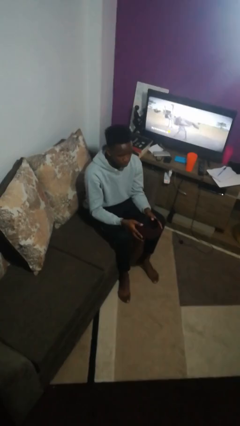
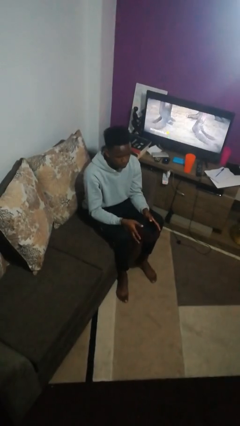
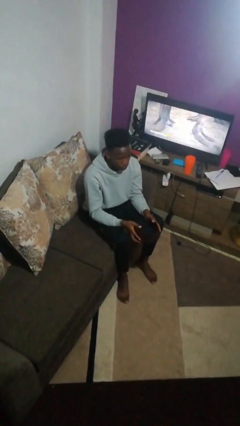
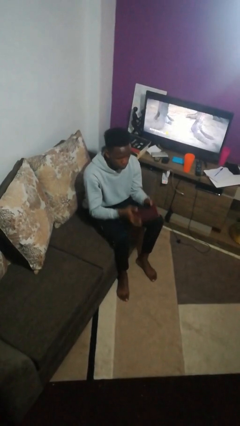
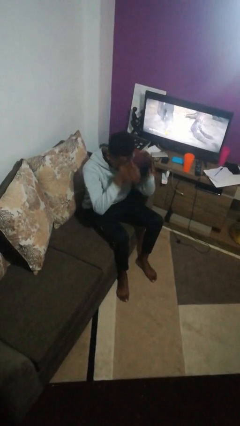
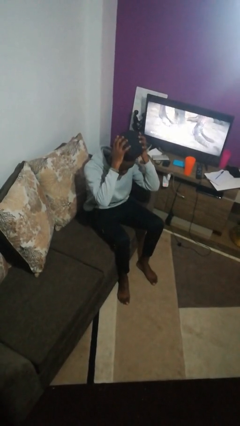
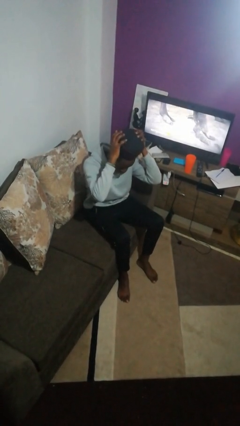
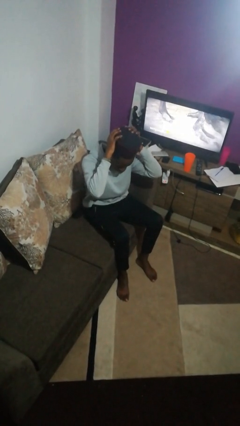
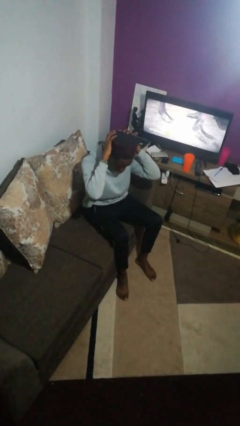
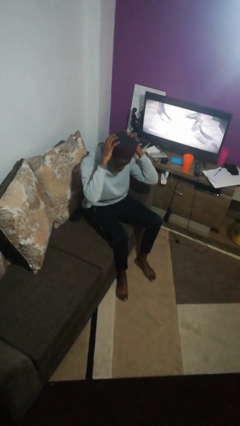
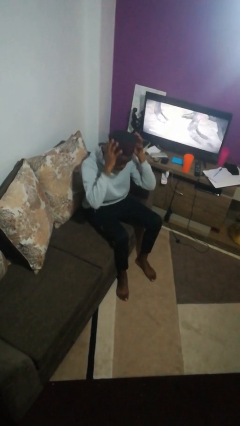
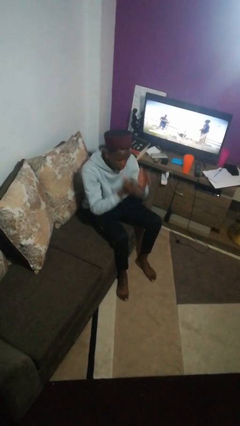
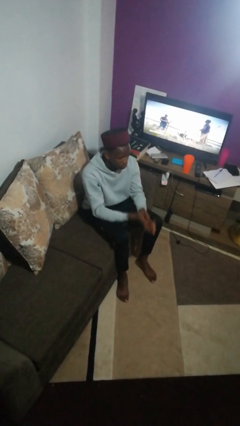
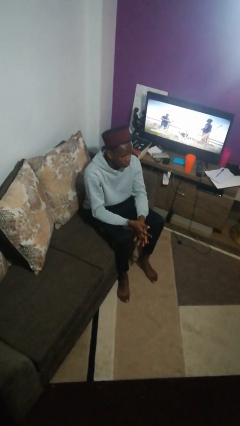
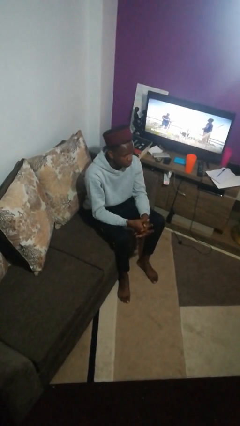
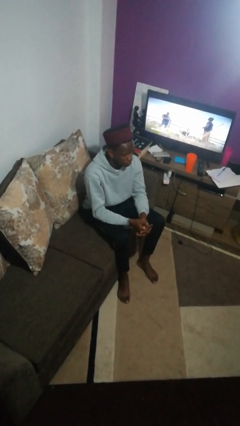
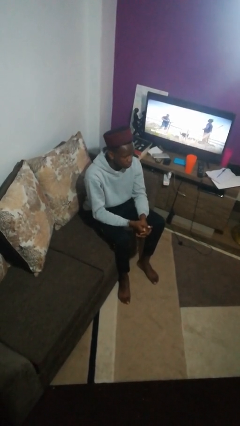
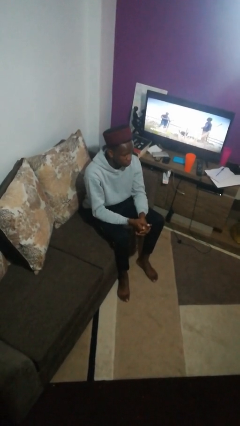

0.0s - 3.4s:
person puts on hat

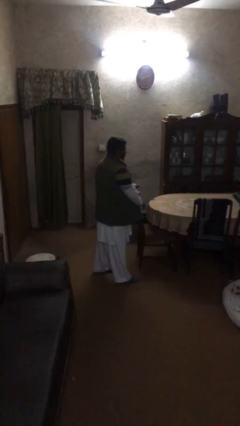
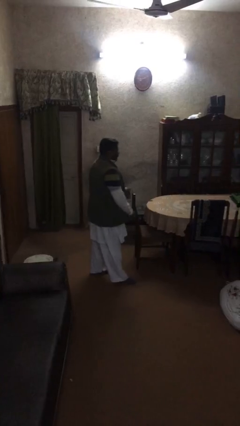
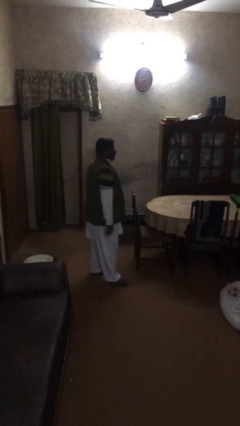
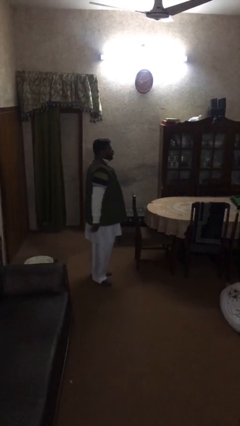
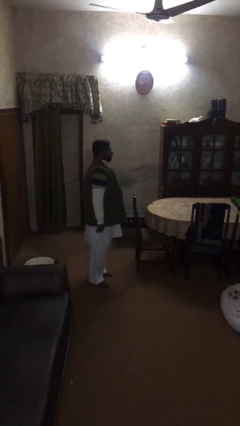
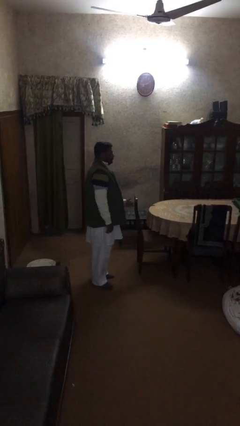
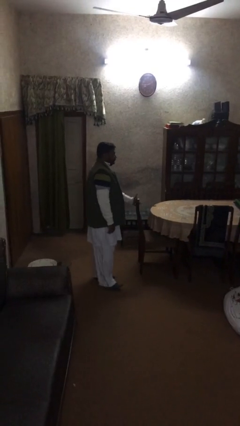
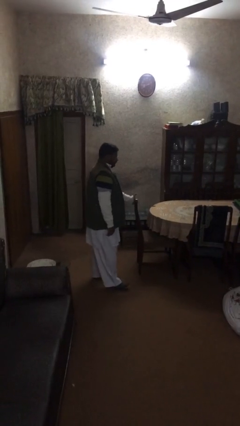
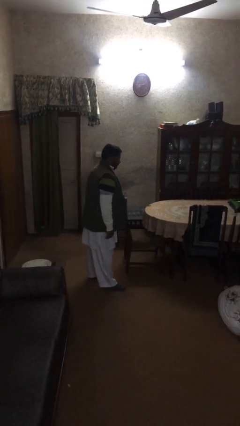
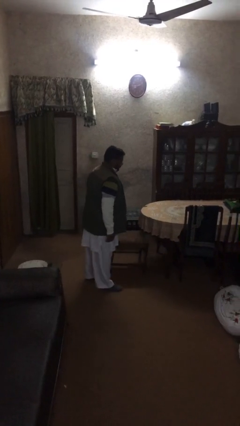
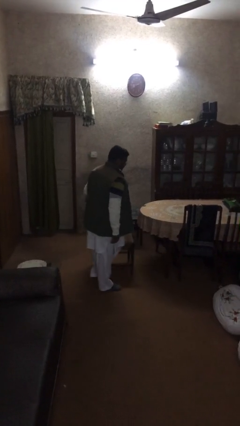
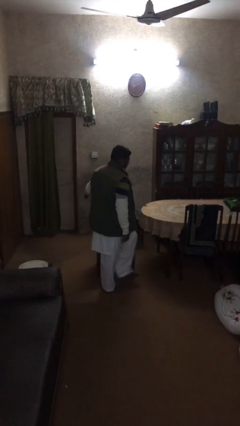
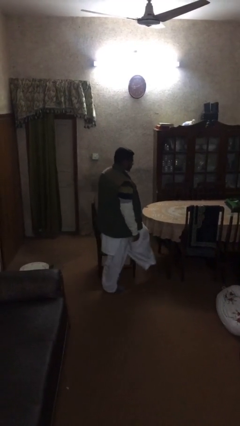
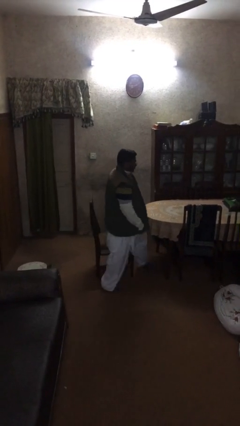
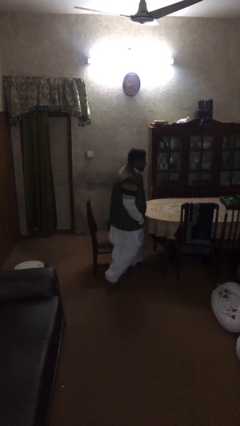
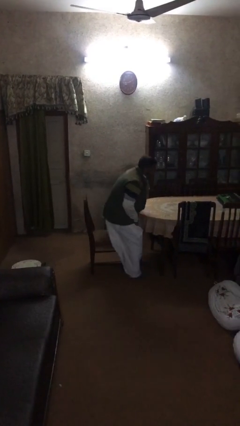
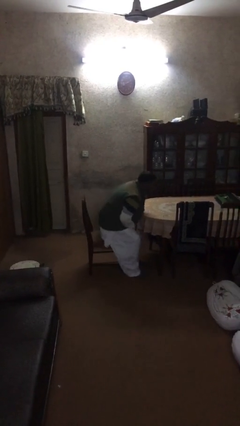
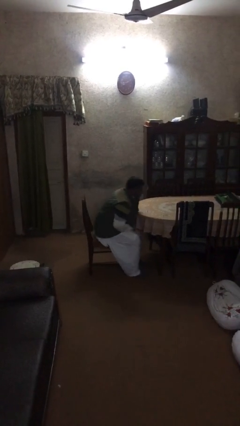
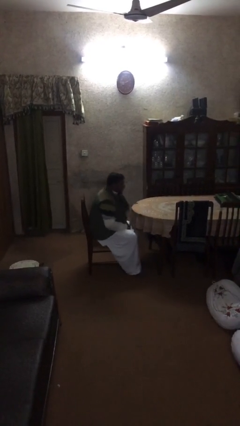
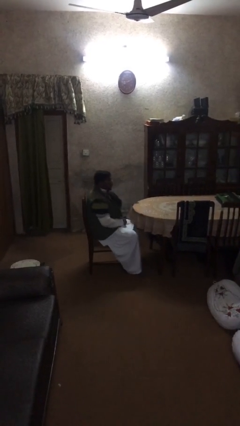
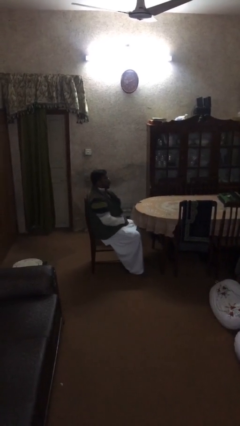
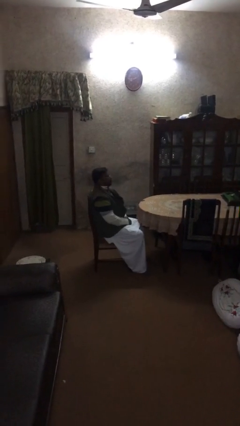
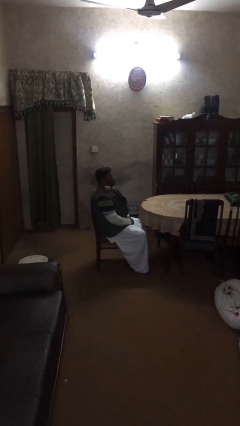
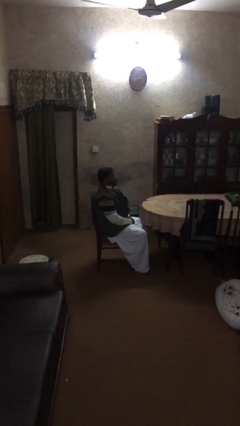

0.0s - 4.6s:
person sits down

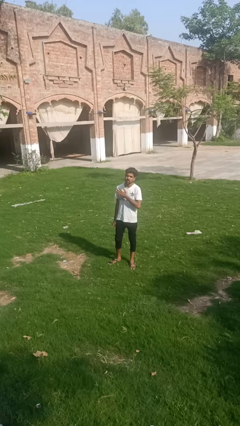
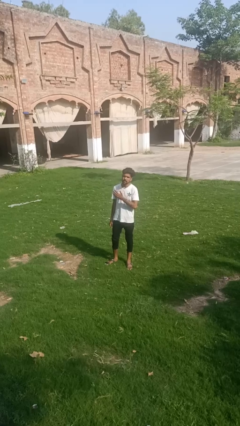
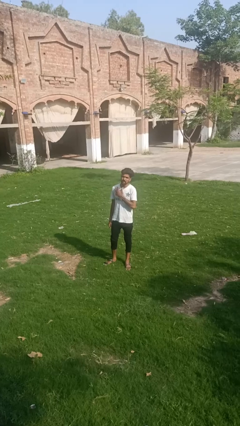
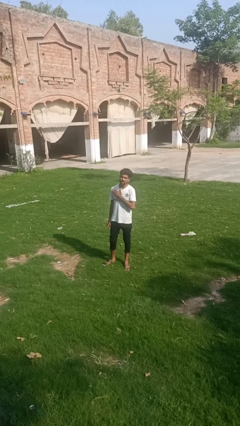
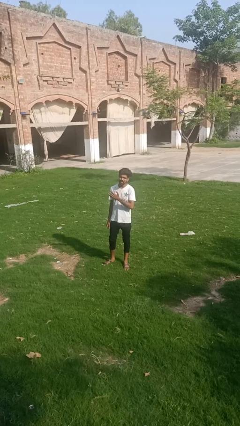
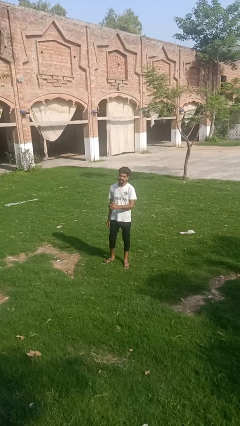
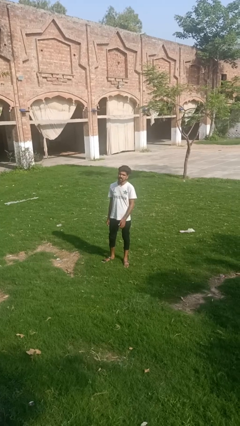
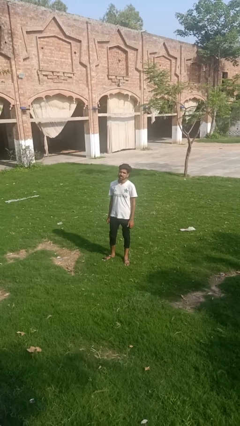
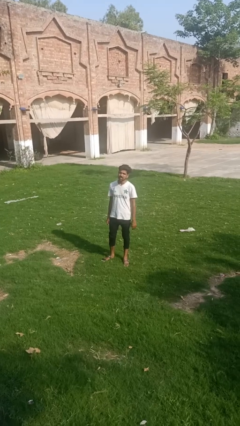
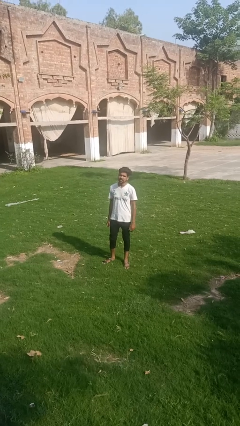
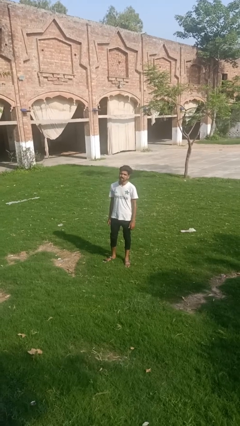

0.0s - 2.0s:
person drums on chest

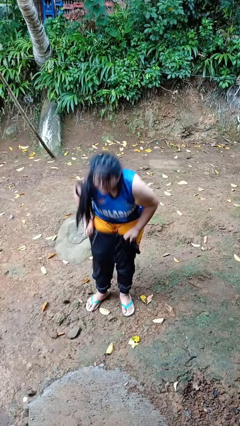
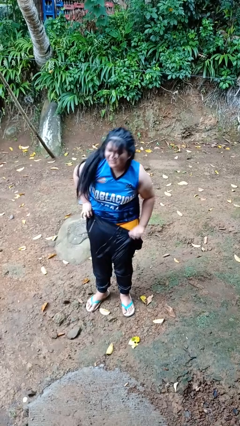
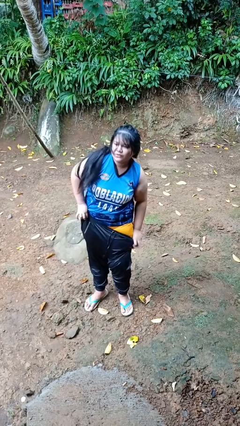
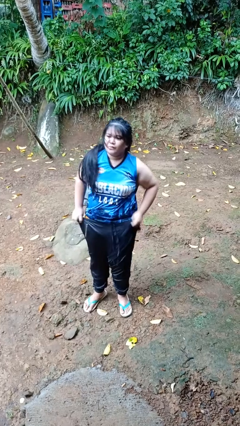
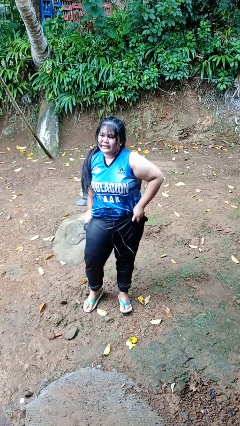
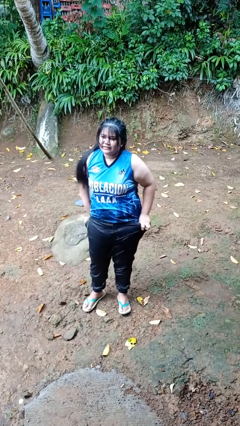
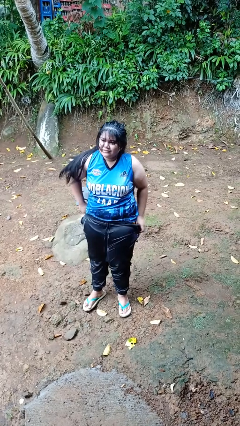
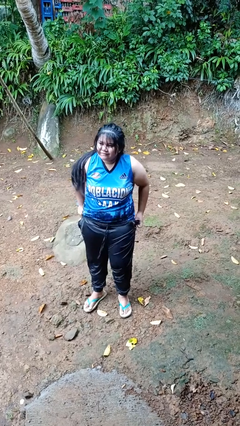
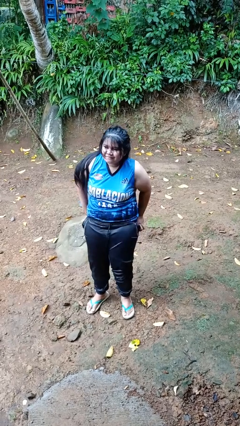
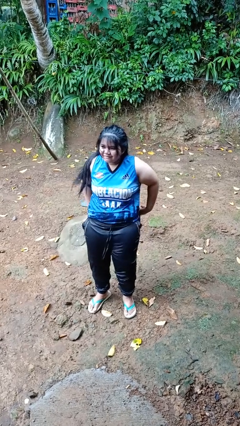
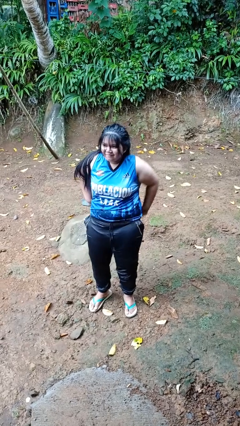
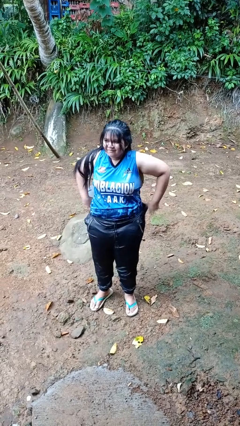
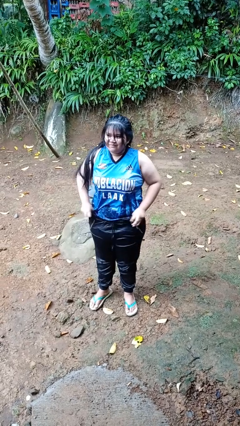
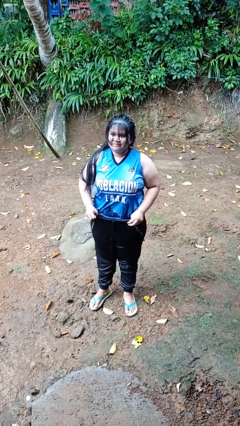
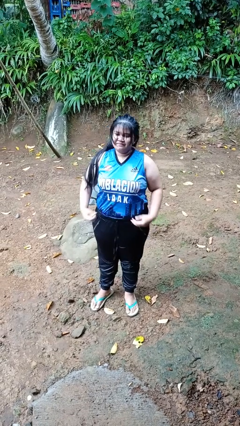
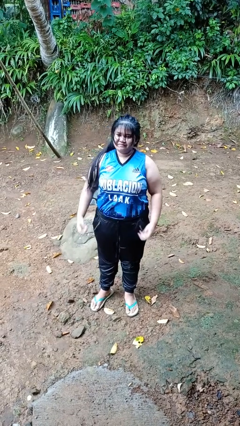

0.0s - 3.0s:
person puts on pants

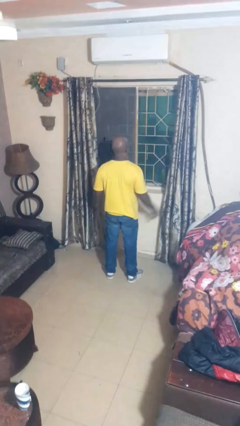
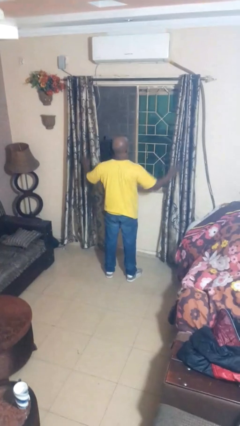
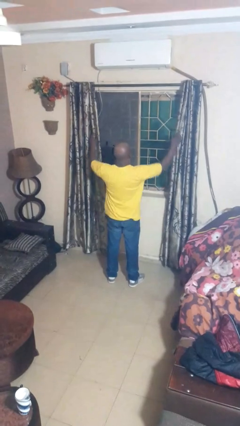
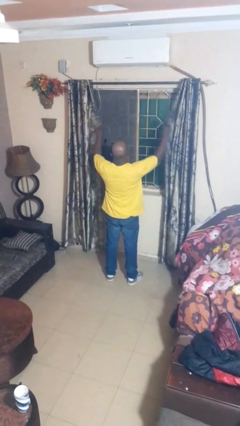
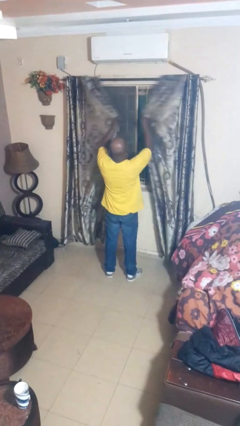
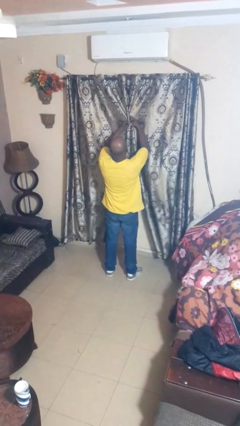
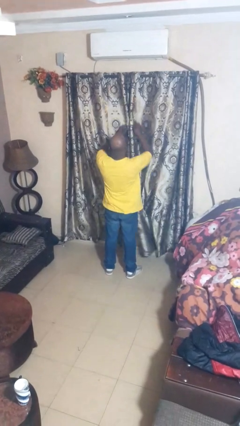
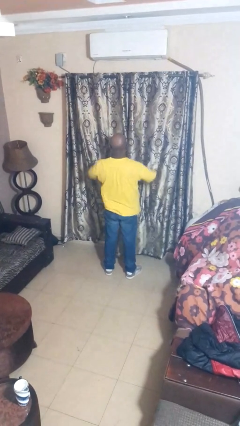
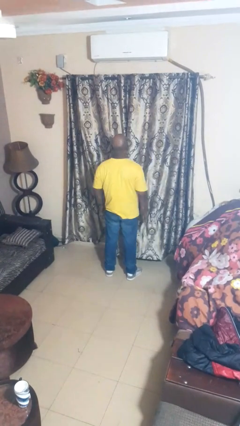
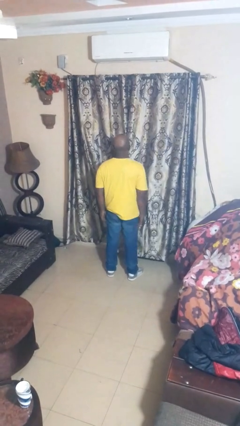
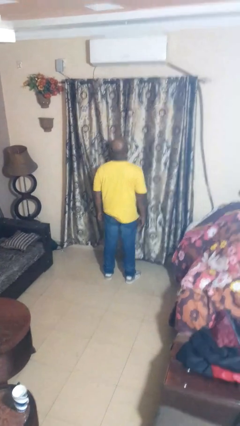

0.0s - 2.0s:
person closes curtains

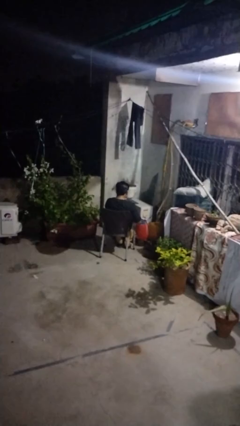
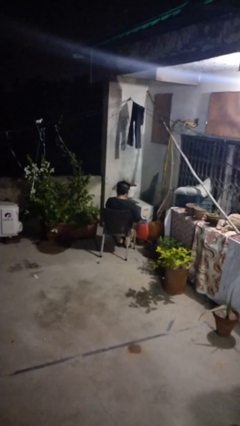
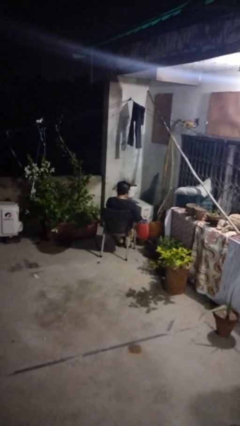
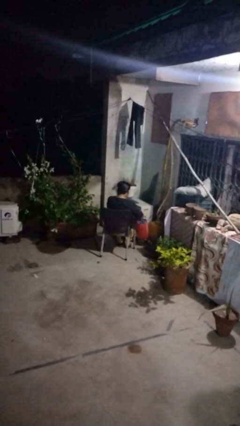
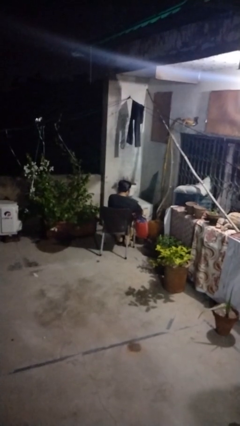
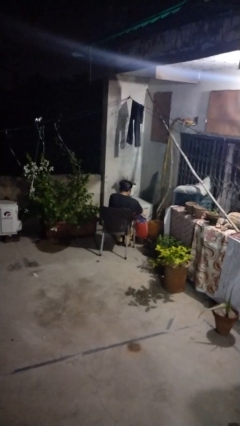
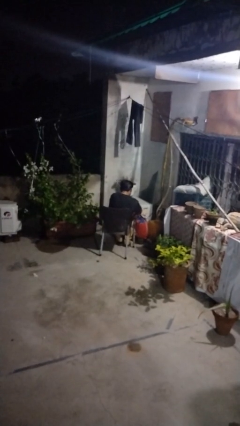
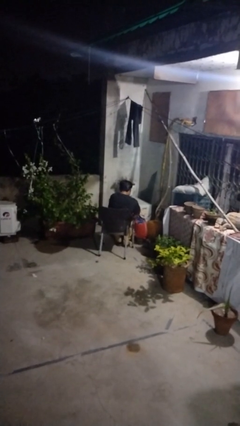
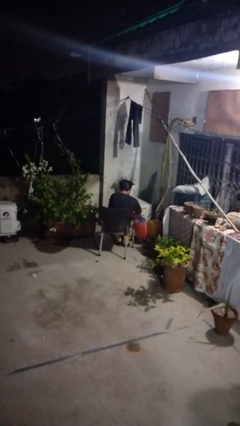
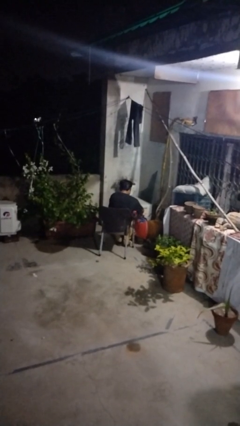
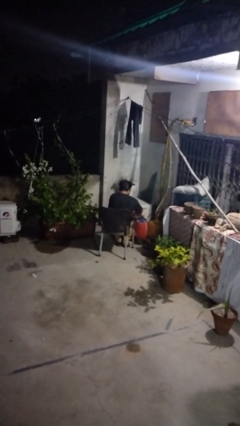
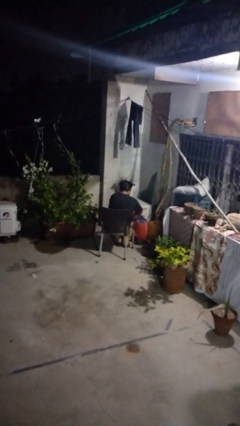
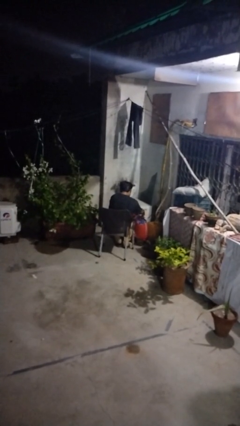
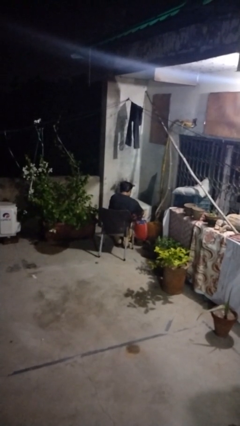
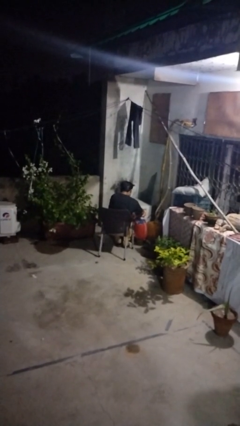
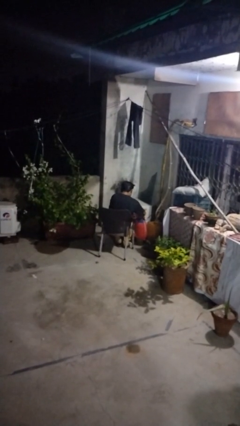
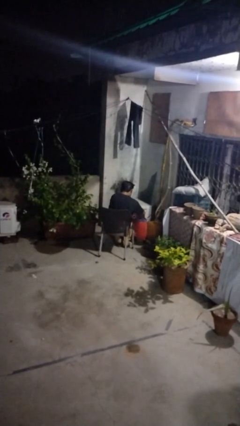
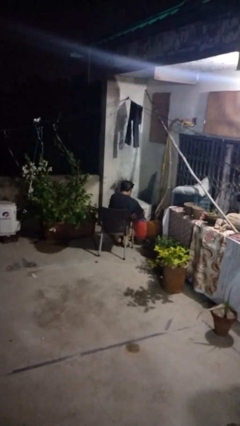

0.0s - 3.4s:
person searches in bag
